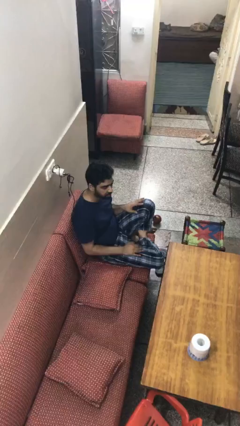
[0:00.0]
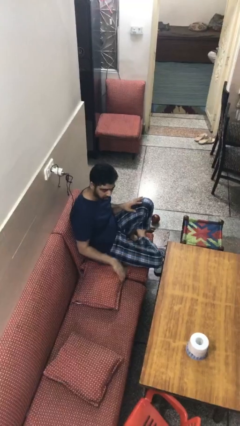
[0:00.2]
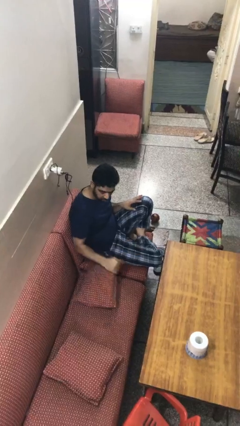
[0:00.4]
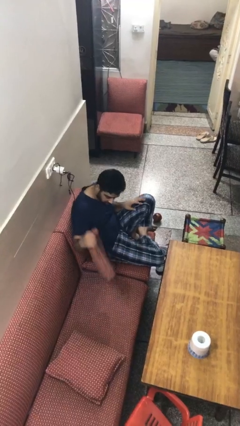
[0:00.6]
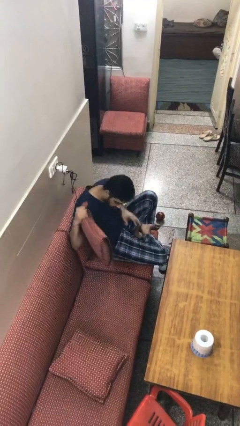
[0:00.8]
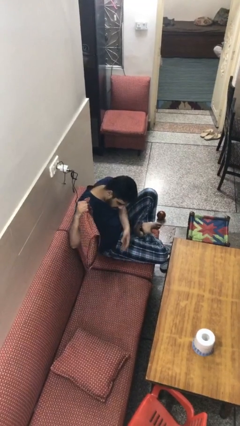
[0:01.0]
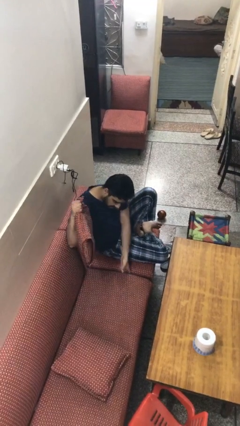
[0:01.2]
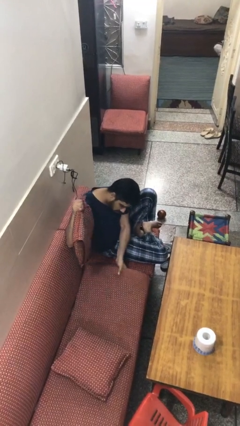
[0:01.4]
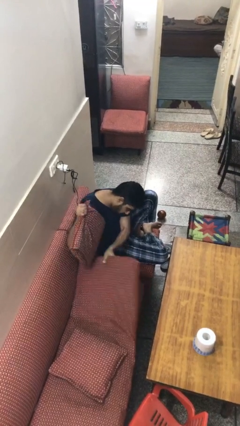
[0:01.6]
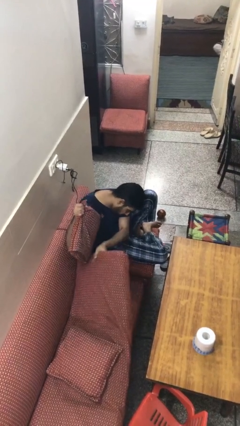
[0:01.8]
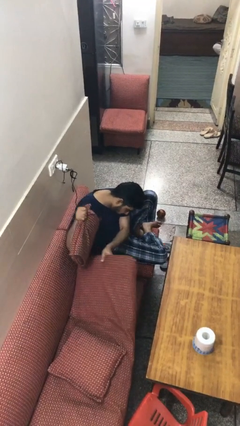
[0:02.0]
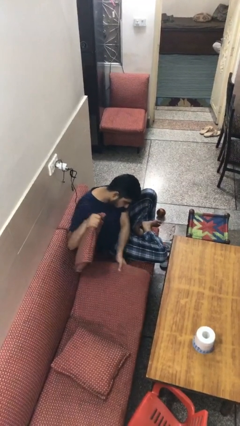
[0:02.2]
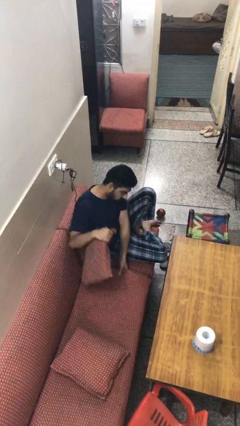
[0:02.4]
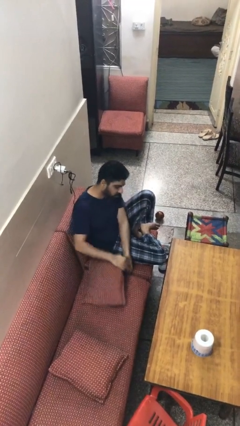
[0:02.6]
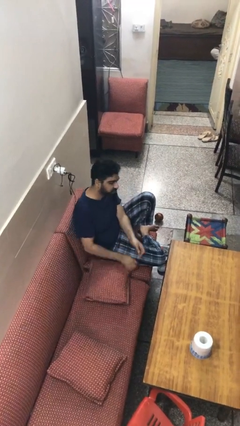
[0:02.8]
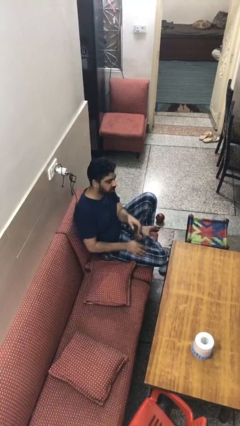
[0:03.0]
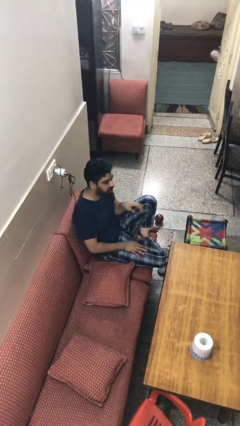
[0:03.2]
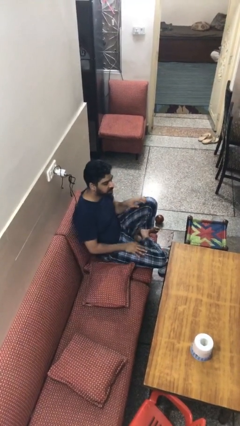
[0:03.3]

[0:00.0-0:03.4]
person searches under couch

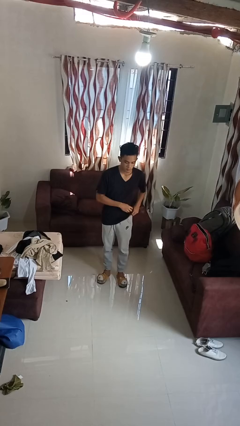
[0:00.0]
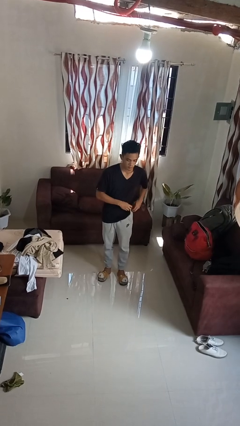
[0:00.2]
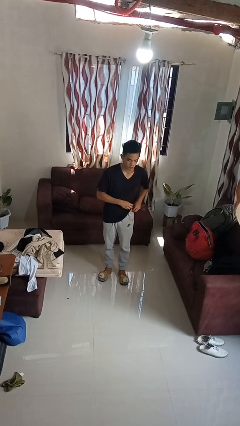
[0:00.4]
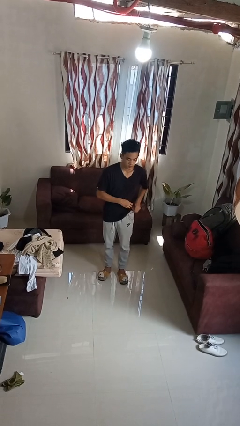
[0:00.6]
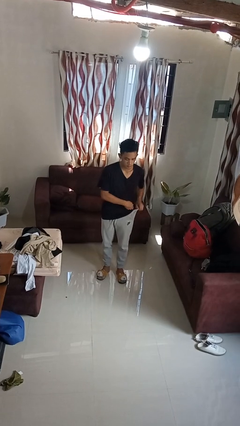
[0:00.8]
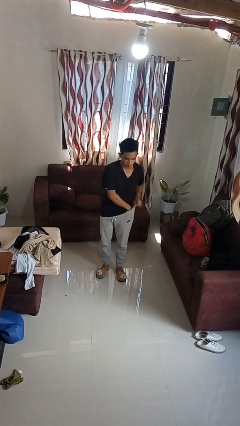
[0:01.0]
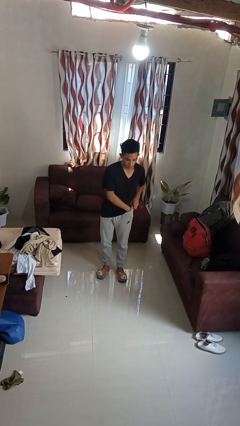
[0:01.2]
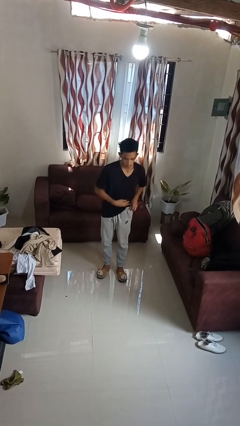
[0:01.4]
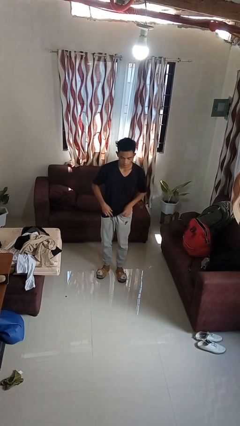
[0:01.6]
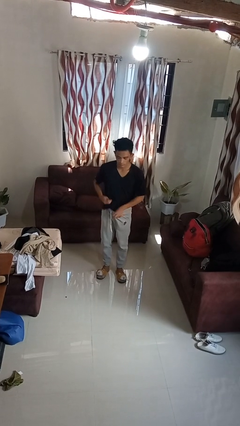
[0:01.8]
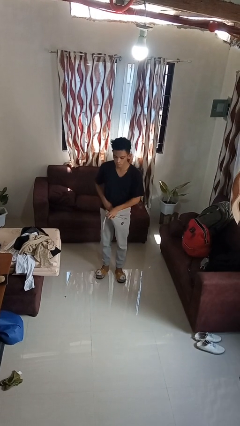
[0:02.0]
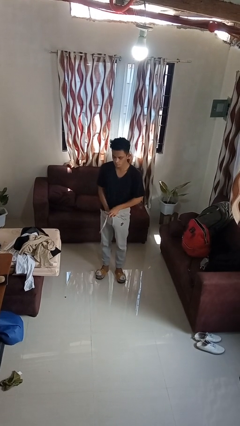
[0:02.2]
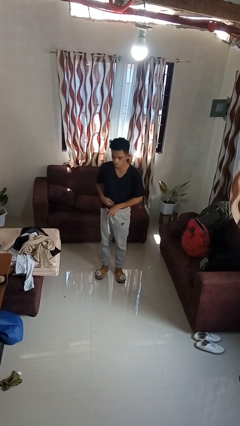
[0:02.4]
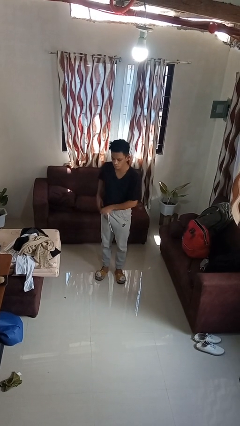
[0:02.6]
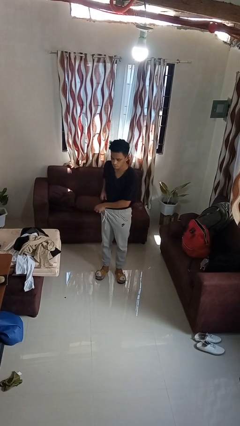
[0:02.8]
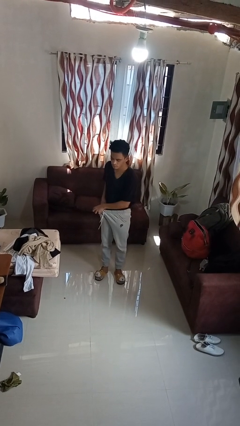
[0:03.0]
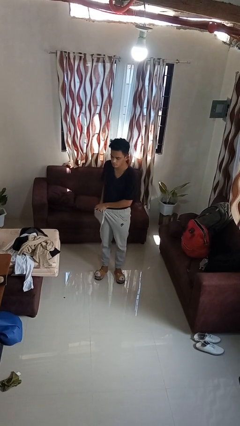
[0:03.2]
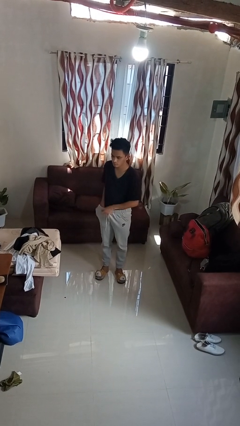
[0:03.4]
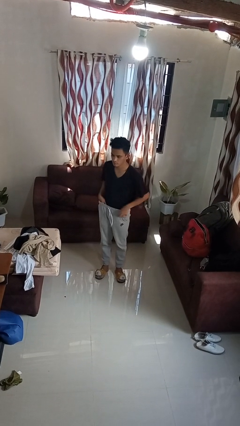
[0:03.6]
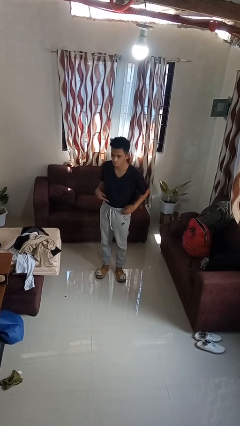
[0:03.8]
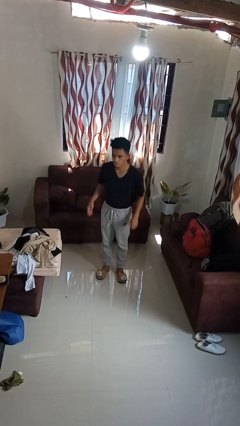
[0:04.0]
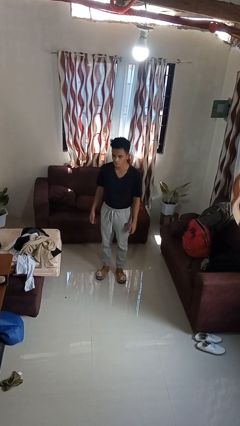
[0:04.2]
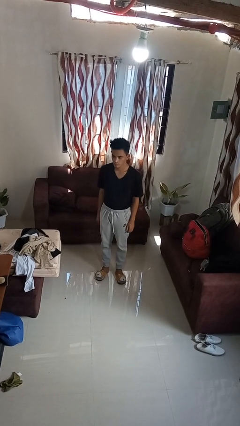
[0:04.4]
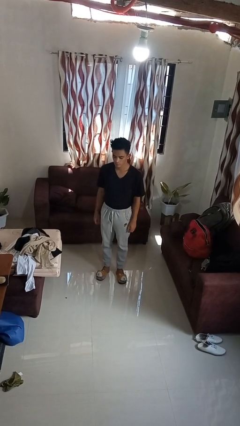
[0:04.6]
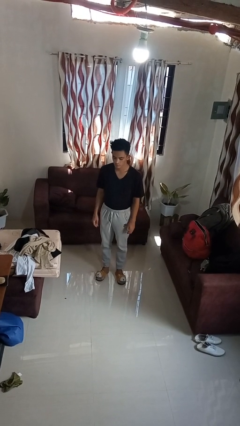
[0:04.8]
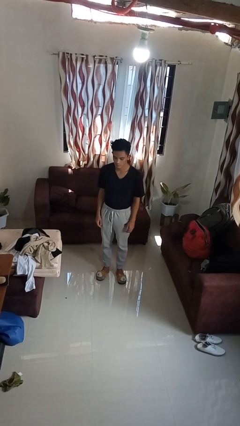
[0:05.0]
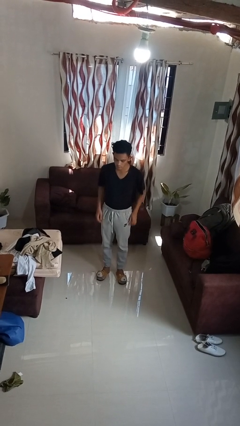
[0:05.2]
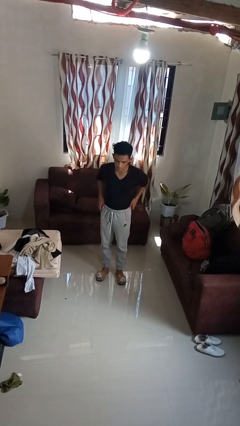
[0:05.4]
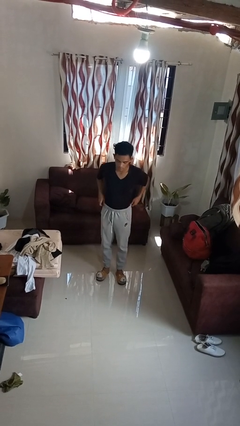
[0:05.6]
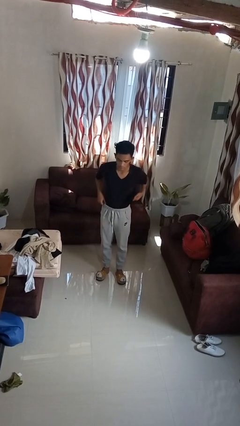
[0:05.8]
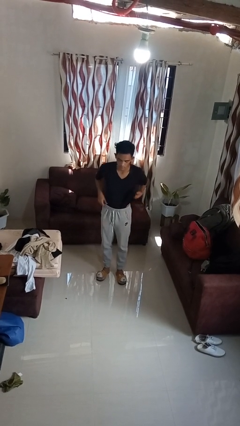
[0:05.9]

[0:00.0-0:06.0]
person tucks in shirt

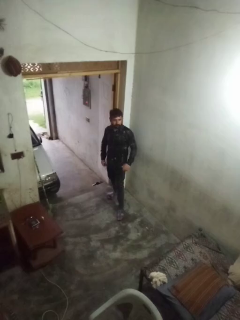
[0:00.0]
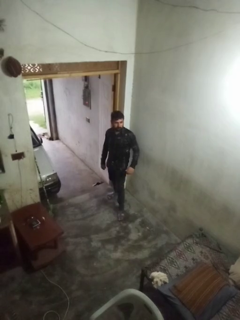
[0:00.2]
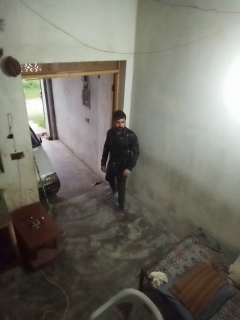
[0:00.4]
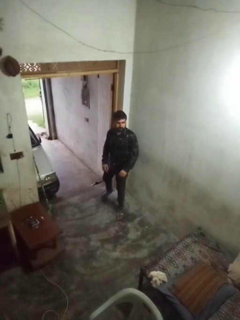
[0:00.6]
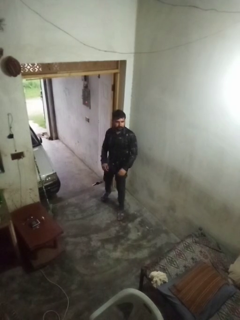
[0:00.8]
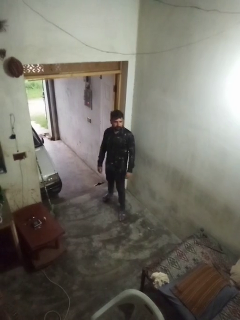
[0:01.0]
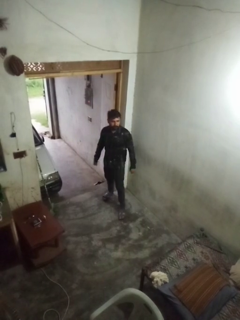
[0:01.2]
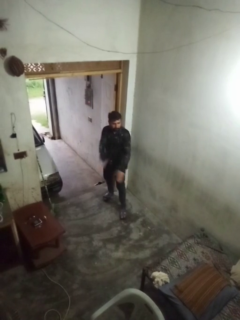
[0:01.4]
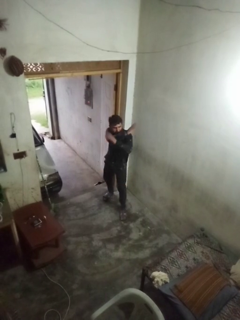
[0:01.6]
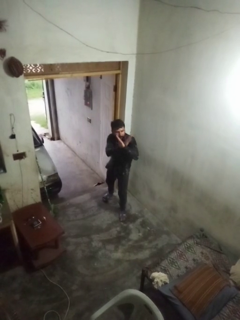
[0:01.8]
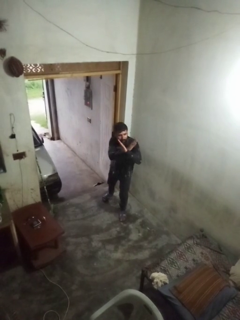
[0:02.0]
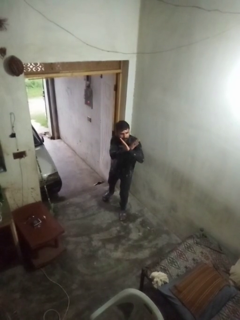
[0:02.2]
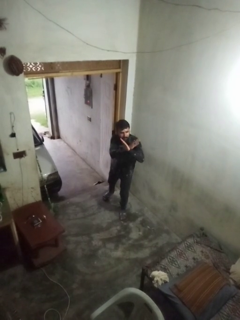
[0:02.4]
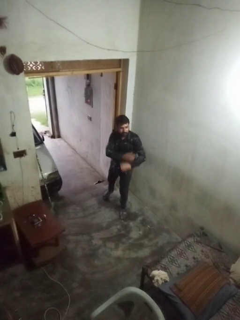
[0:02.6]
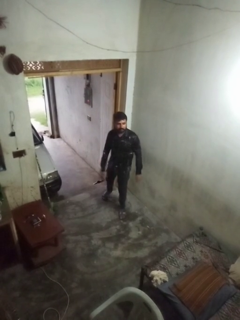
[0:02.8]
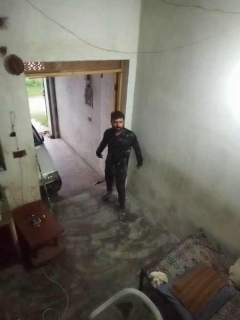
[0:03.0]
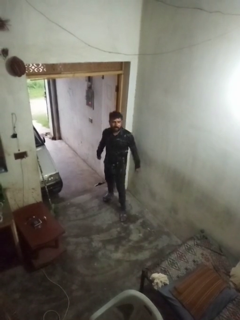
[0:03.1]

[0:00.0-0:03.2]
person karate chop

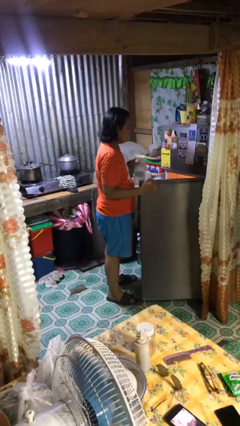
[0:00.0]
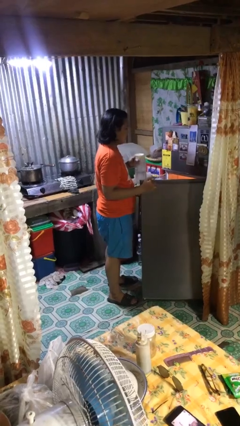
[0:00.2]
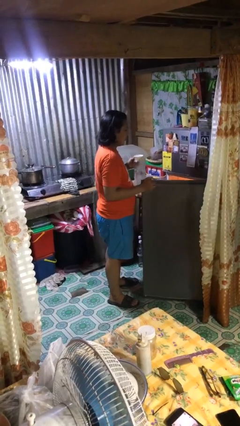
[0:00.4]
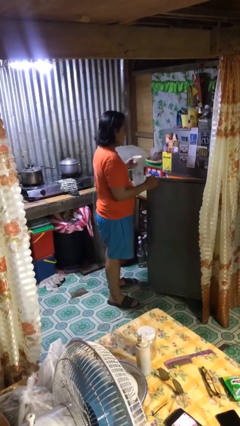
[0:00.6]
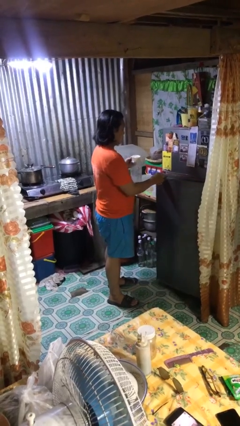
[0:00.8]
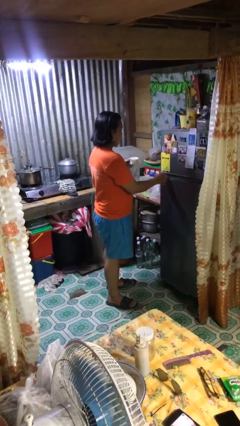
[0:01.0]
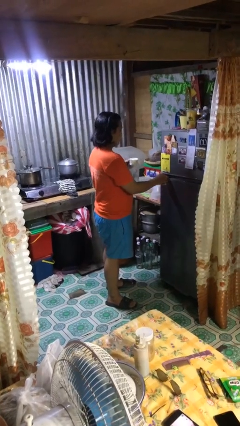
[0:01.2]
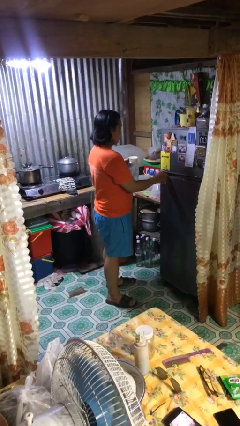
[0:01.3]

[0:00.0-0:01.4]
person closes refrigerator

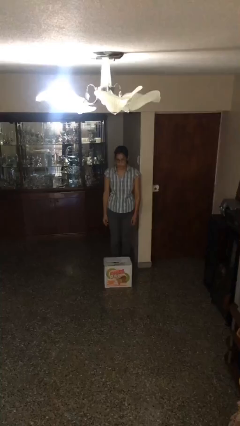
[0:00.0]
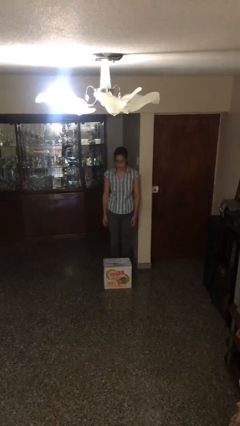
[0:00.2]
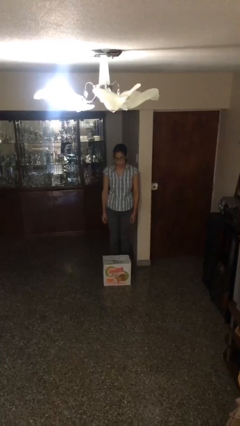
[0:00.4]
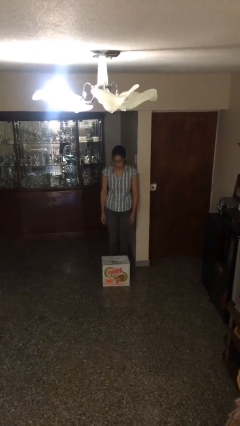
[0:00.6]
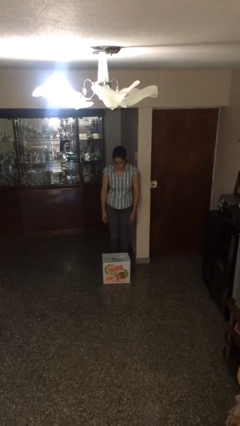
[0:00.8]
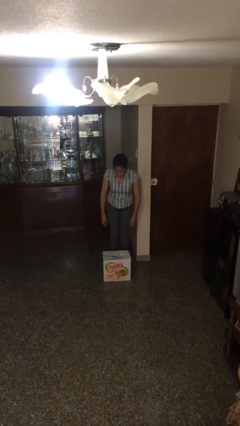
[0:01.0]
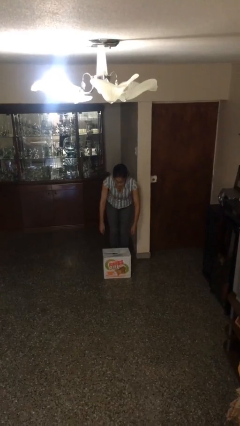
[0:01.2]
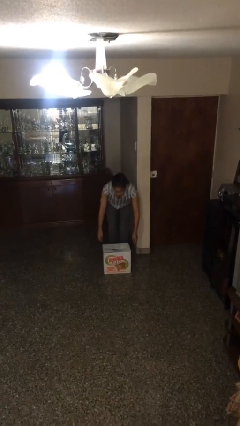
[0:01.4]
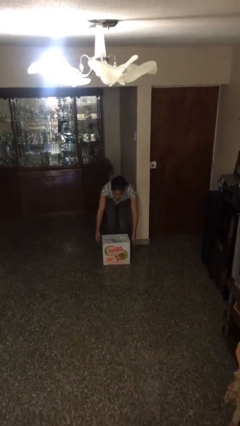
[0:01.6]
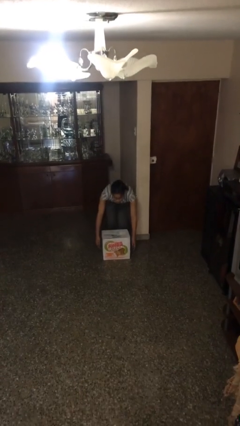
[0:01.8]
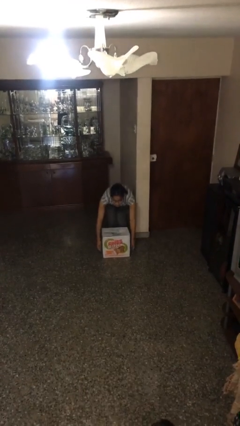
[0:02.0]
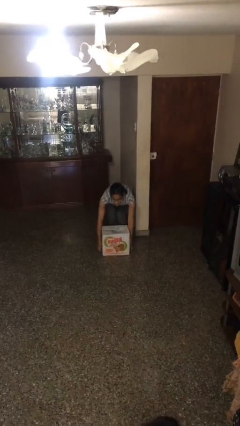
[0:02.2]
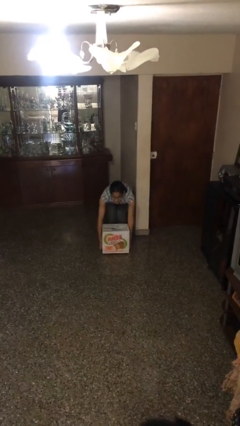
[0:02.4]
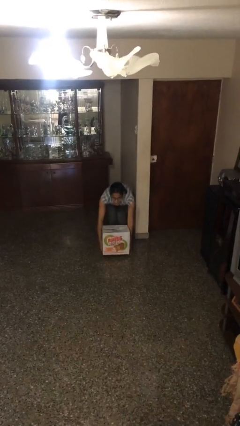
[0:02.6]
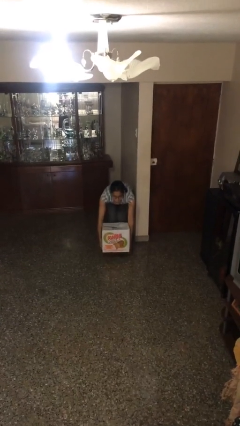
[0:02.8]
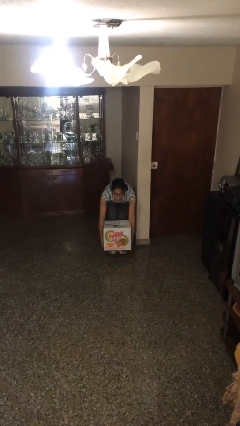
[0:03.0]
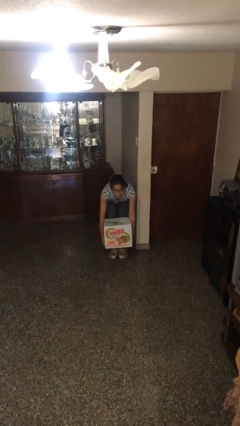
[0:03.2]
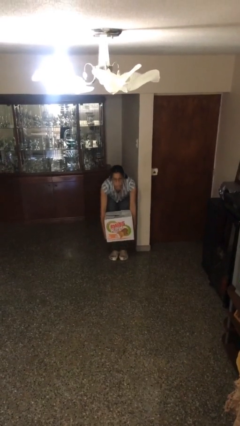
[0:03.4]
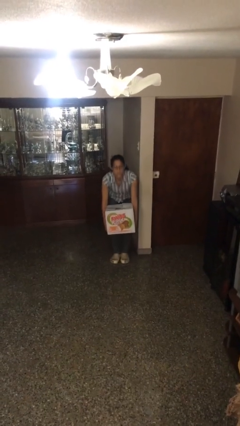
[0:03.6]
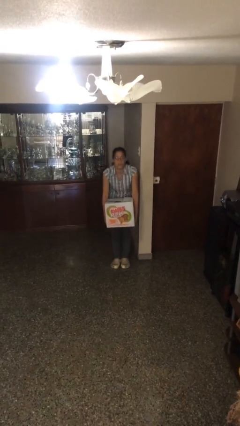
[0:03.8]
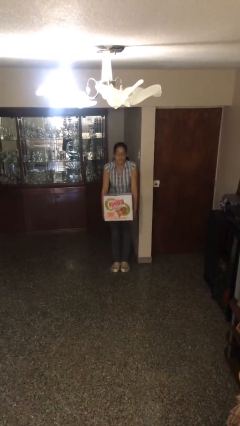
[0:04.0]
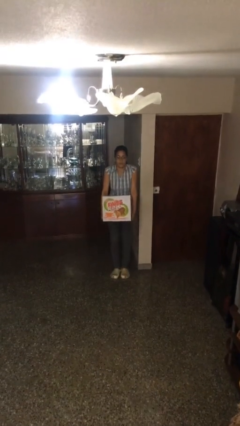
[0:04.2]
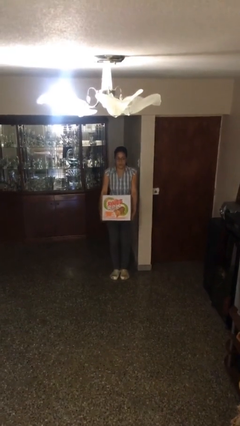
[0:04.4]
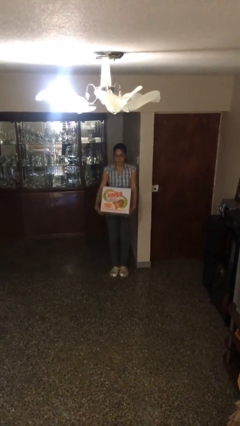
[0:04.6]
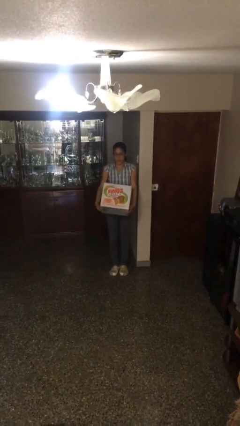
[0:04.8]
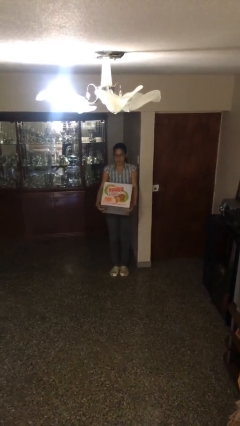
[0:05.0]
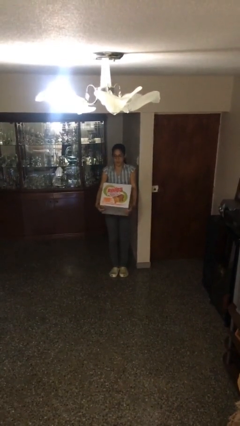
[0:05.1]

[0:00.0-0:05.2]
person picks up object from floor
